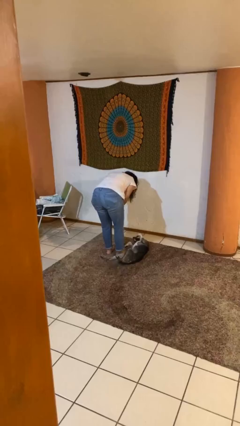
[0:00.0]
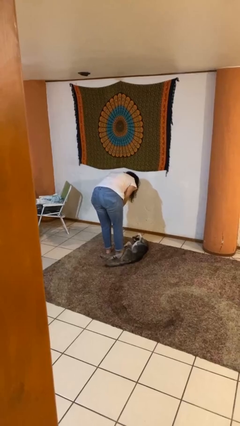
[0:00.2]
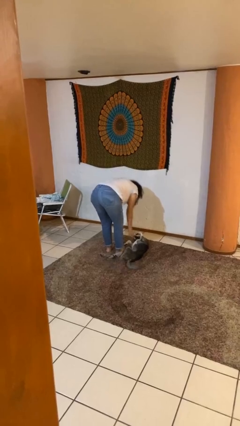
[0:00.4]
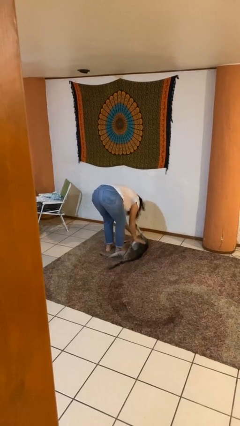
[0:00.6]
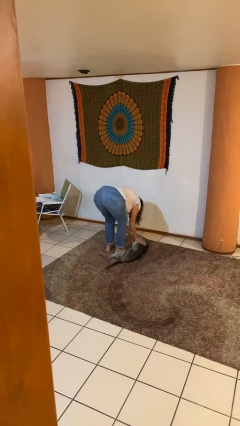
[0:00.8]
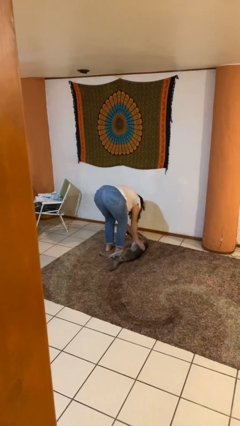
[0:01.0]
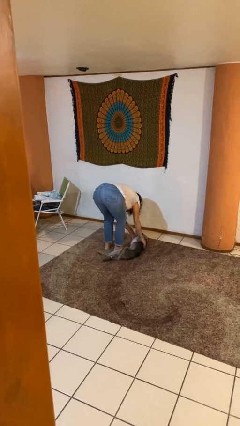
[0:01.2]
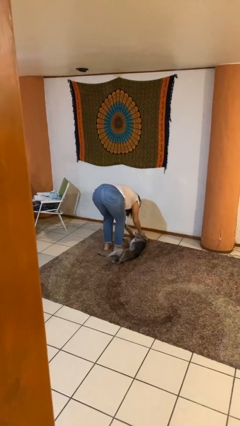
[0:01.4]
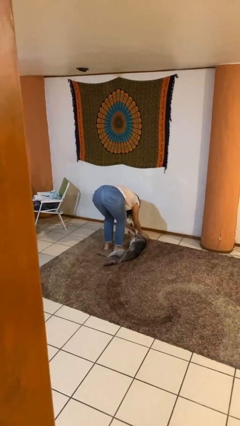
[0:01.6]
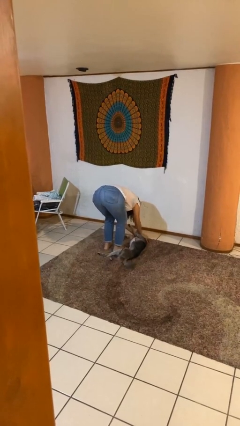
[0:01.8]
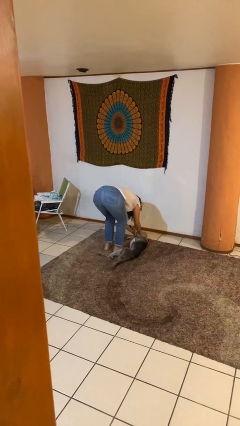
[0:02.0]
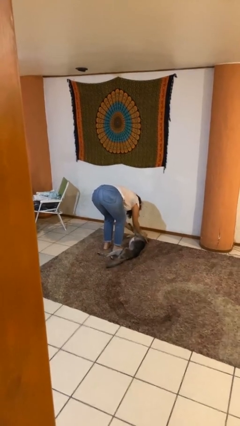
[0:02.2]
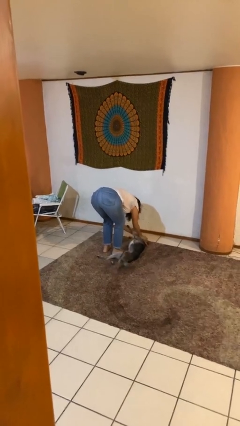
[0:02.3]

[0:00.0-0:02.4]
person pets dog

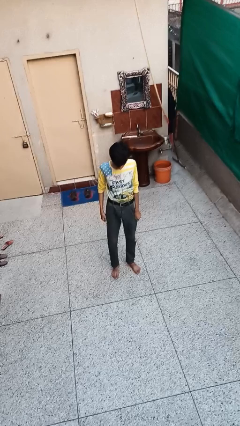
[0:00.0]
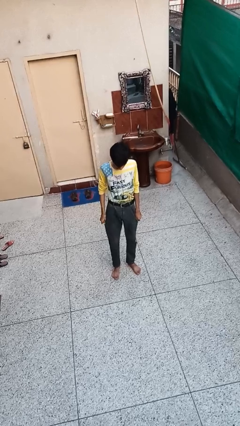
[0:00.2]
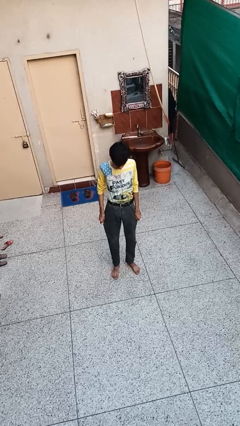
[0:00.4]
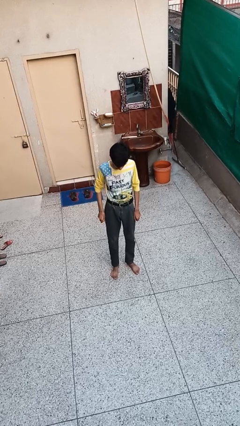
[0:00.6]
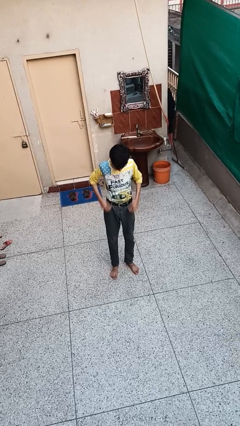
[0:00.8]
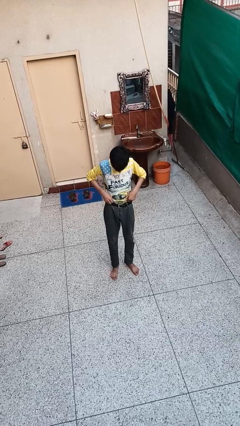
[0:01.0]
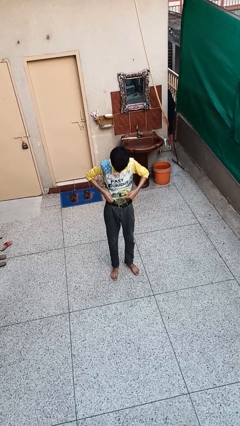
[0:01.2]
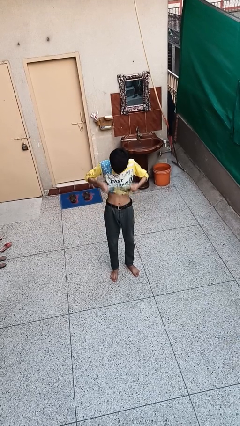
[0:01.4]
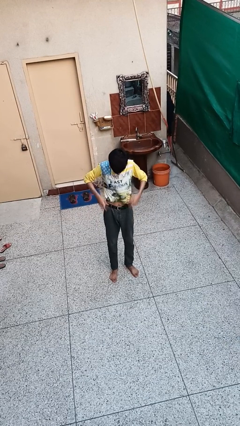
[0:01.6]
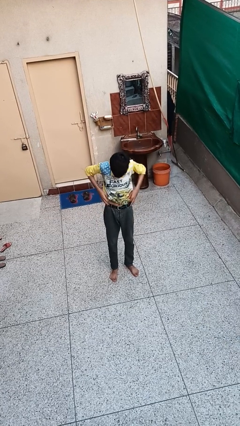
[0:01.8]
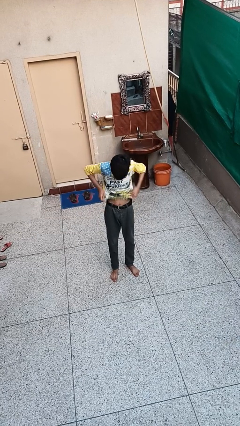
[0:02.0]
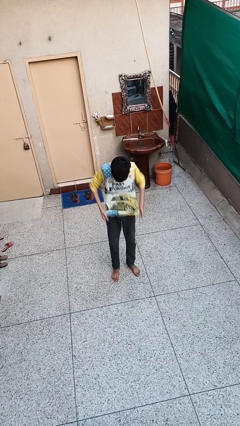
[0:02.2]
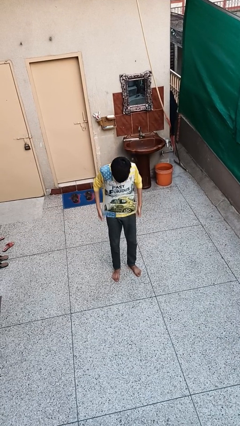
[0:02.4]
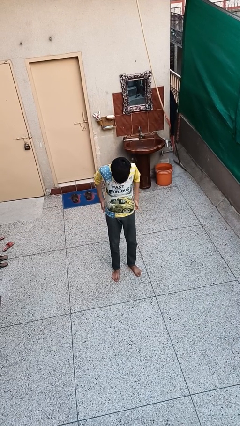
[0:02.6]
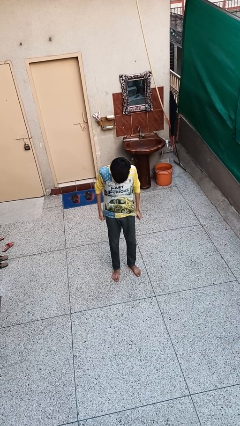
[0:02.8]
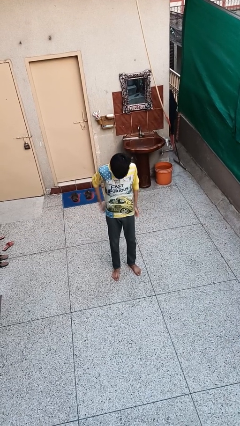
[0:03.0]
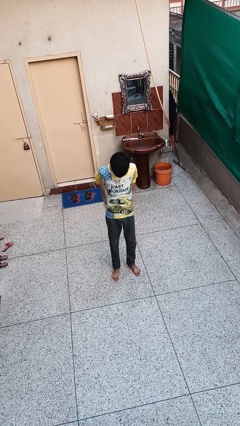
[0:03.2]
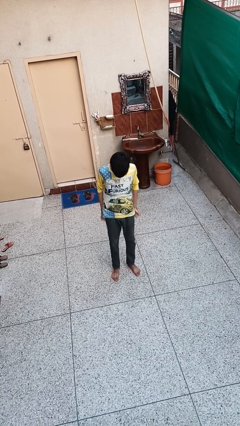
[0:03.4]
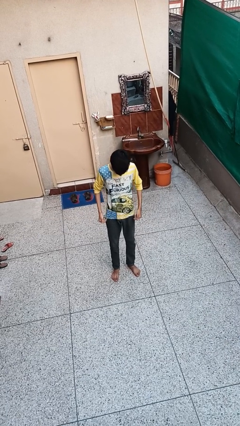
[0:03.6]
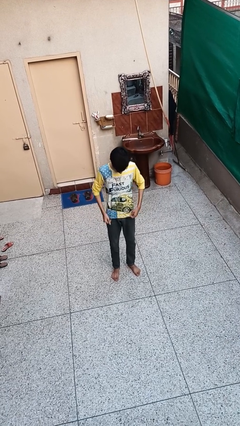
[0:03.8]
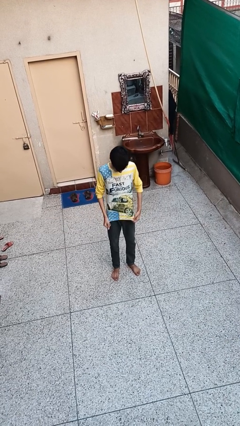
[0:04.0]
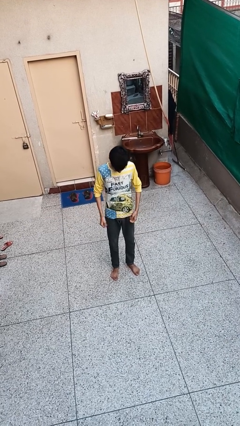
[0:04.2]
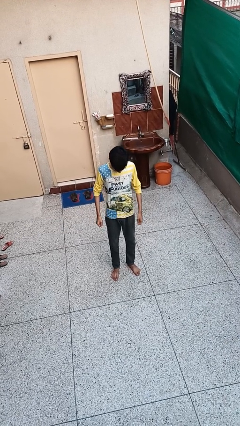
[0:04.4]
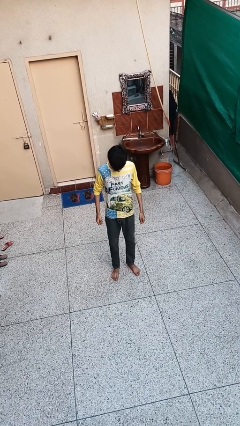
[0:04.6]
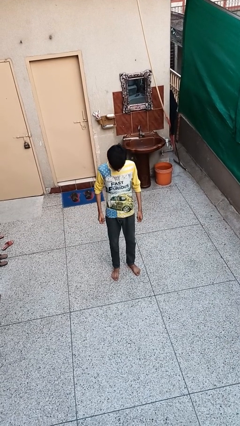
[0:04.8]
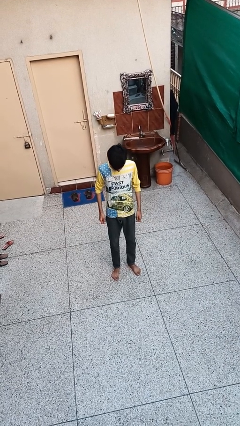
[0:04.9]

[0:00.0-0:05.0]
person untucks shirt

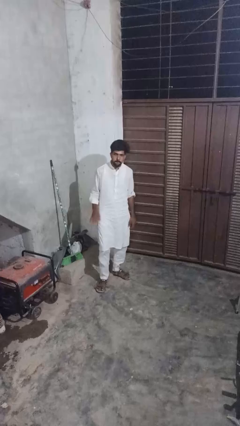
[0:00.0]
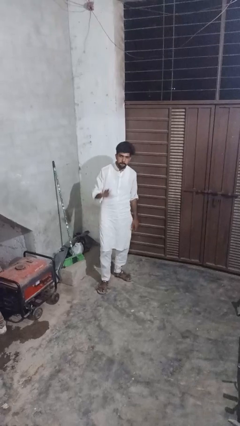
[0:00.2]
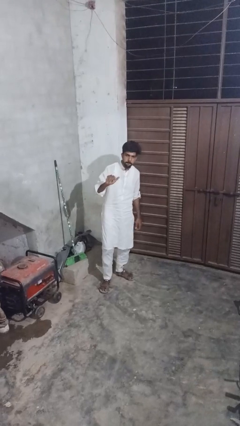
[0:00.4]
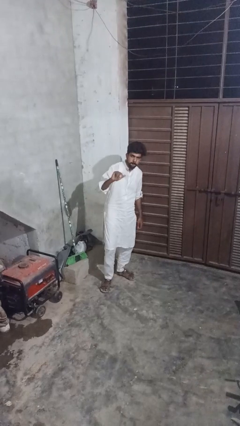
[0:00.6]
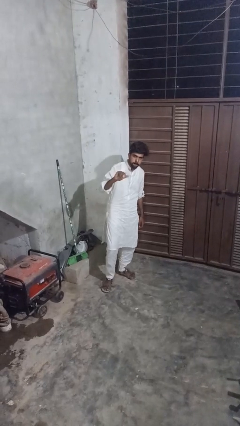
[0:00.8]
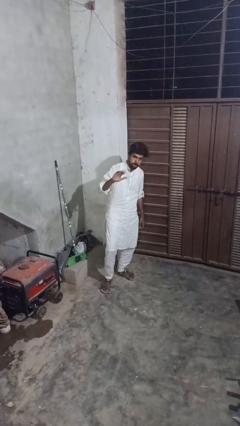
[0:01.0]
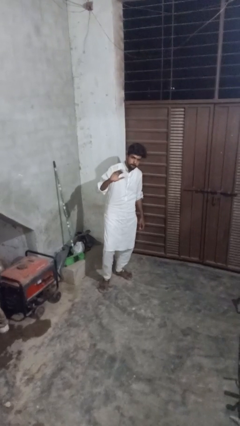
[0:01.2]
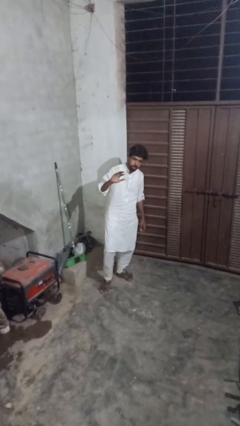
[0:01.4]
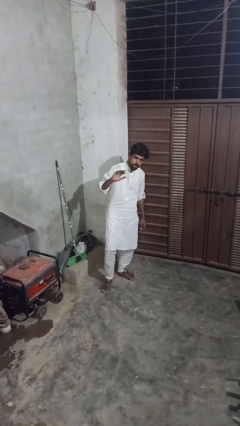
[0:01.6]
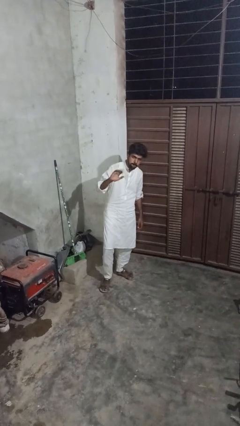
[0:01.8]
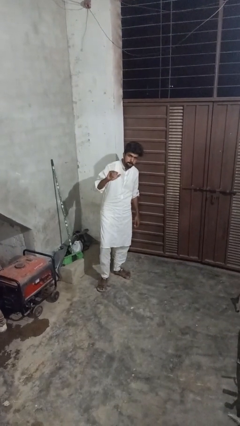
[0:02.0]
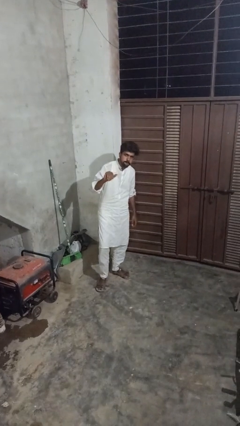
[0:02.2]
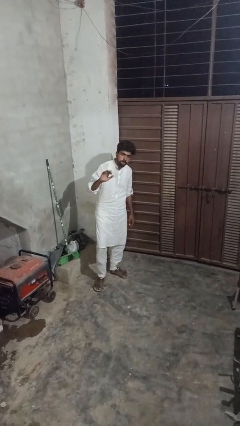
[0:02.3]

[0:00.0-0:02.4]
person gestures come here

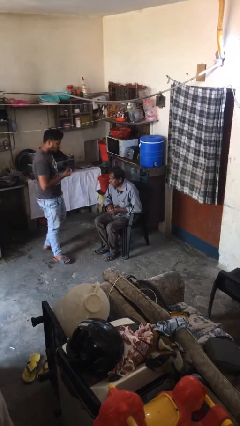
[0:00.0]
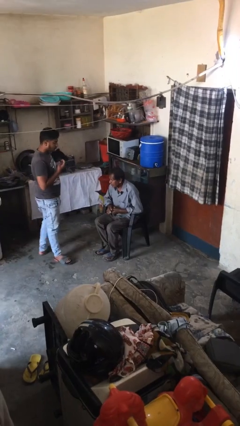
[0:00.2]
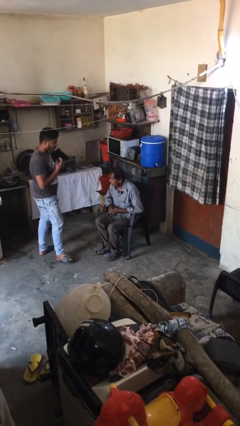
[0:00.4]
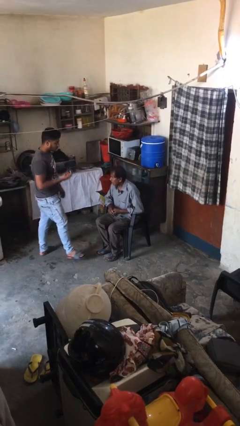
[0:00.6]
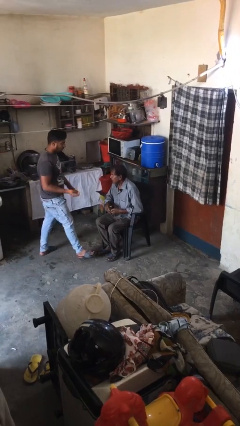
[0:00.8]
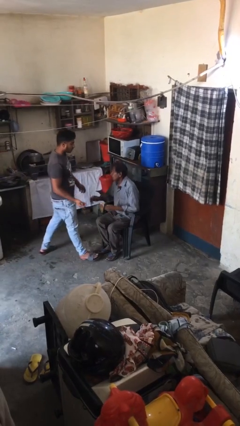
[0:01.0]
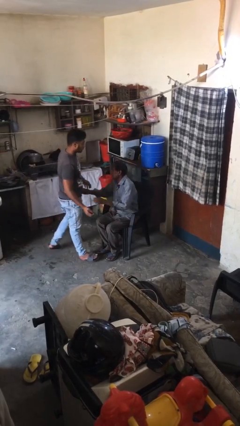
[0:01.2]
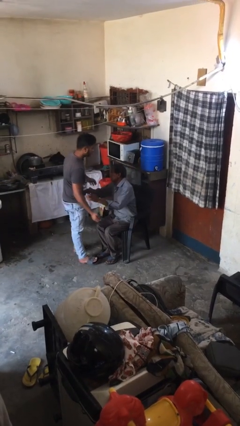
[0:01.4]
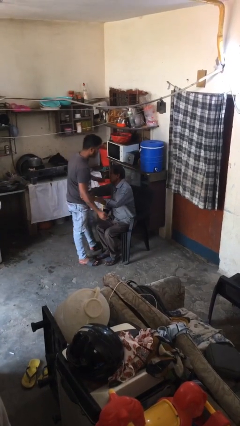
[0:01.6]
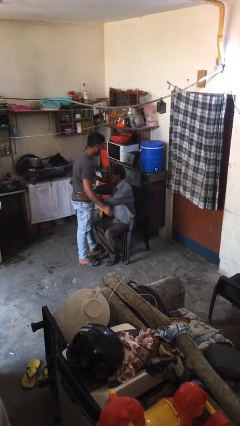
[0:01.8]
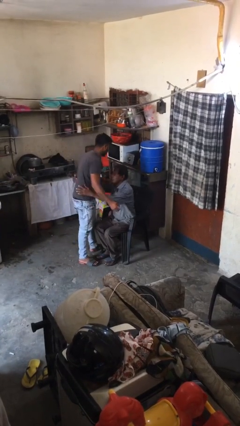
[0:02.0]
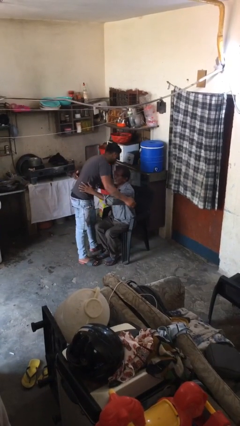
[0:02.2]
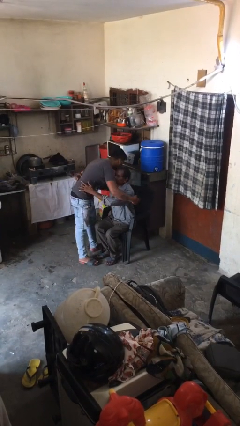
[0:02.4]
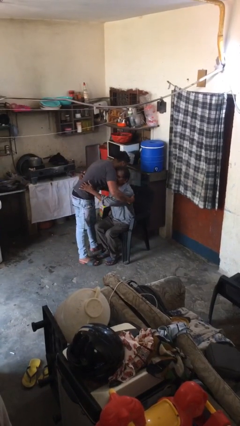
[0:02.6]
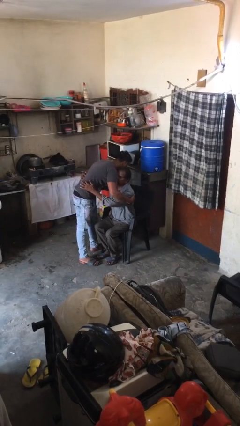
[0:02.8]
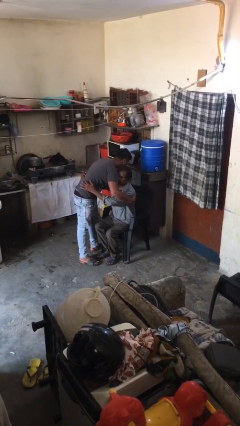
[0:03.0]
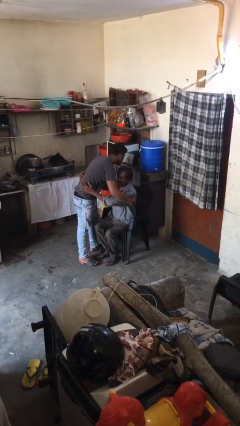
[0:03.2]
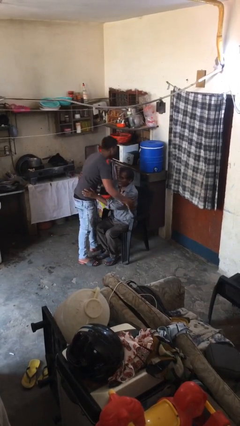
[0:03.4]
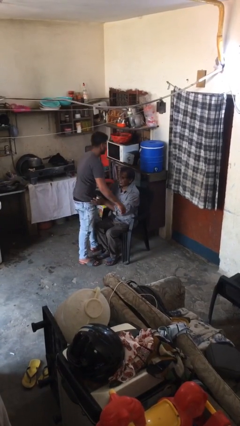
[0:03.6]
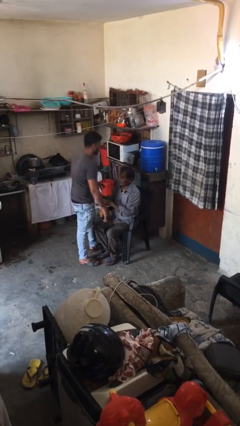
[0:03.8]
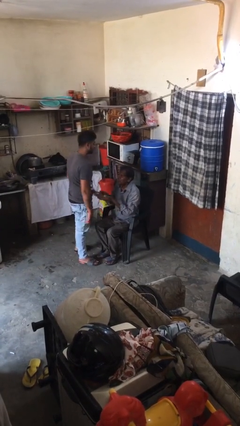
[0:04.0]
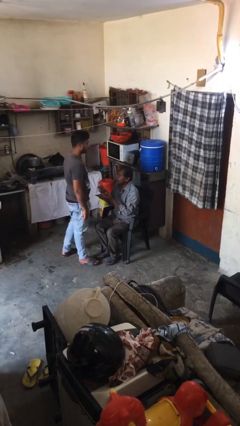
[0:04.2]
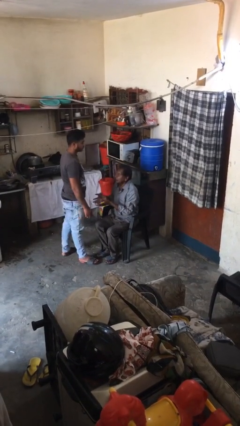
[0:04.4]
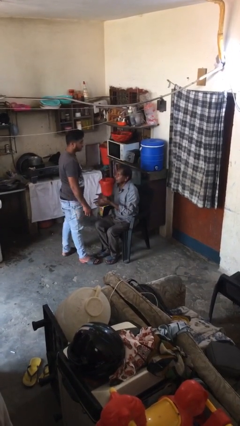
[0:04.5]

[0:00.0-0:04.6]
person embraces person

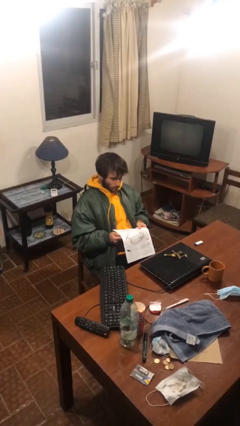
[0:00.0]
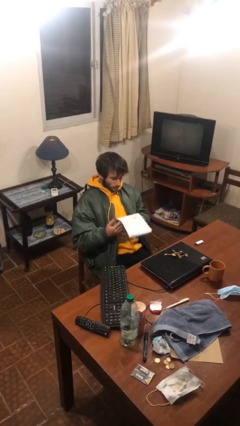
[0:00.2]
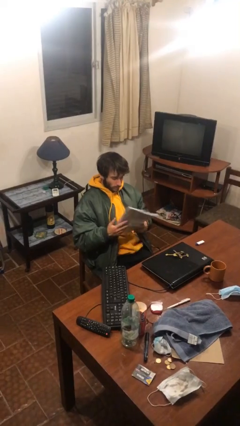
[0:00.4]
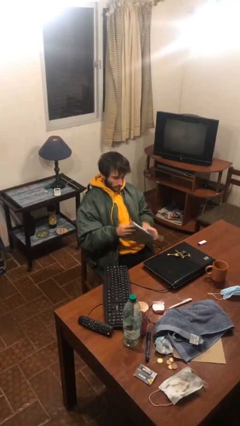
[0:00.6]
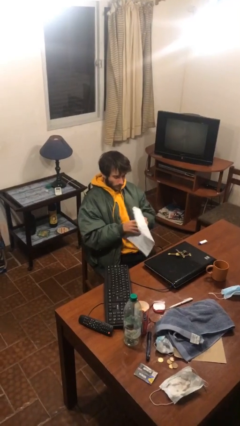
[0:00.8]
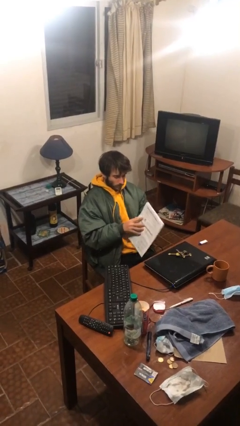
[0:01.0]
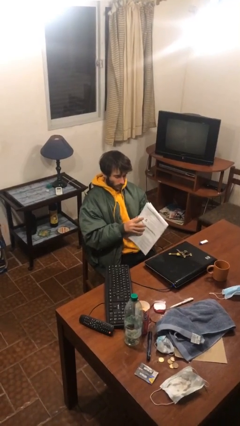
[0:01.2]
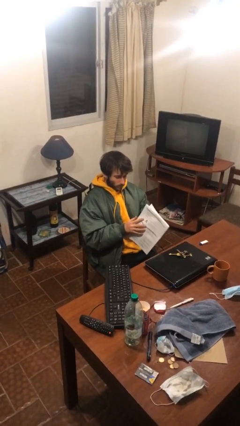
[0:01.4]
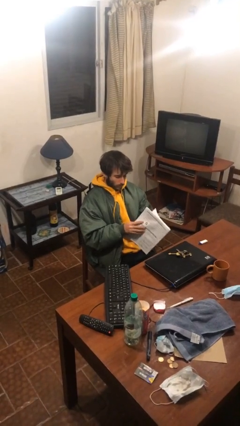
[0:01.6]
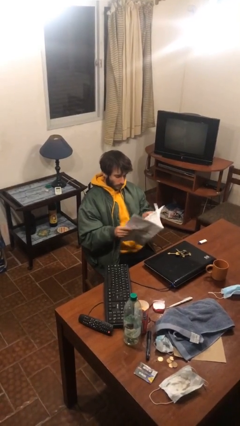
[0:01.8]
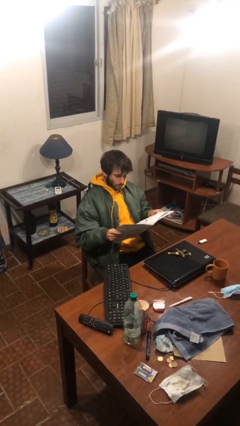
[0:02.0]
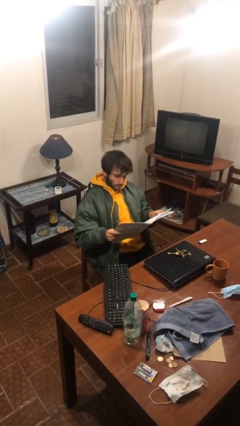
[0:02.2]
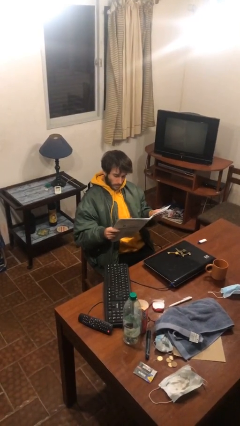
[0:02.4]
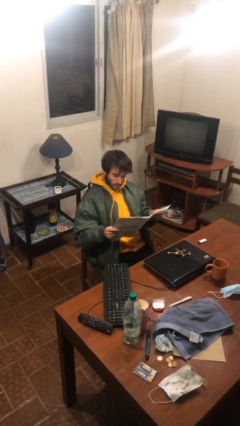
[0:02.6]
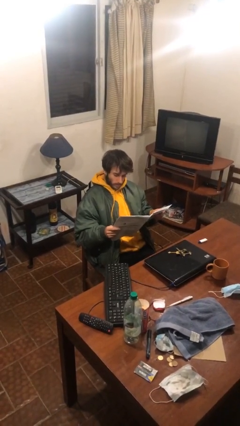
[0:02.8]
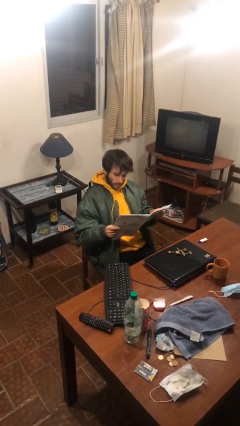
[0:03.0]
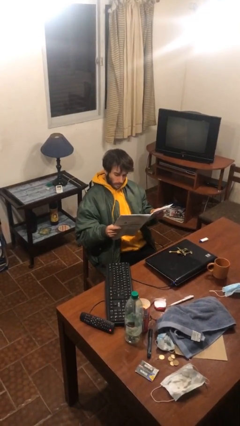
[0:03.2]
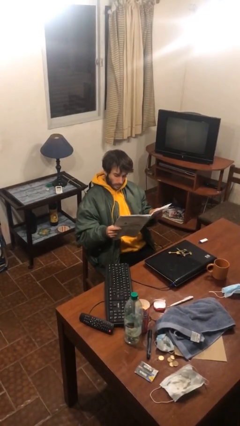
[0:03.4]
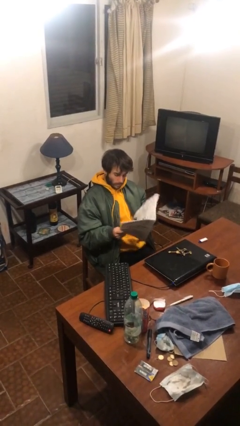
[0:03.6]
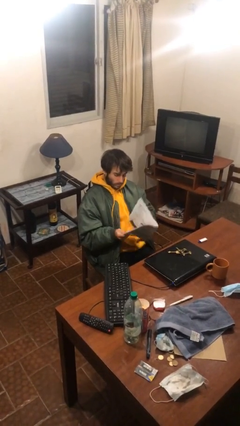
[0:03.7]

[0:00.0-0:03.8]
person reads document
